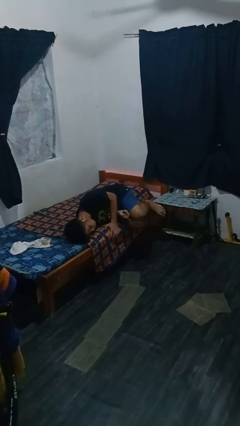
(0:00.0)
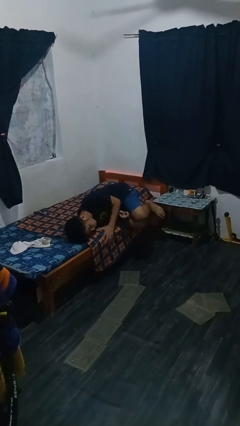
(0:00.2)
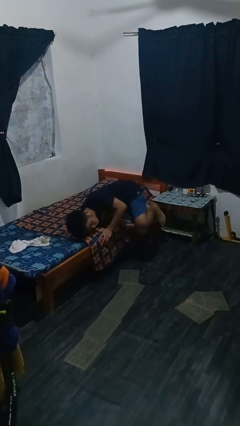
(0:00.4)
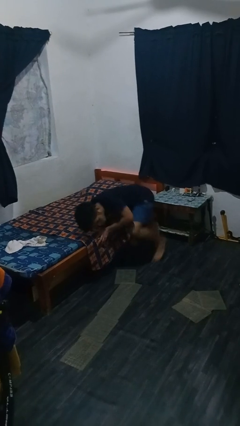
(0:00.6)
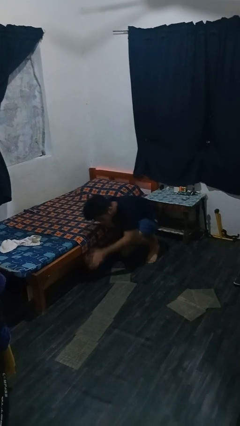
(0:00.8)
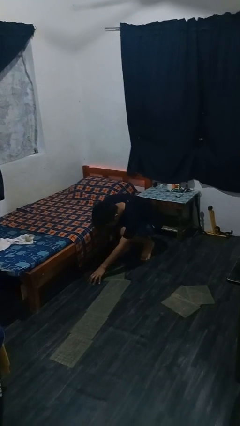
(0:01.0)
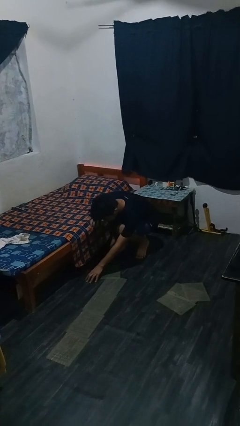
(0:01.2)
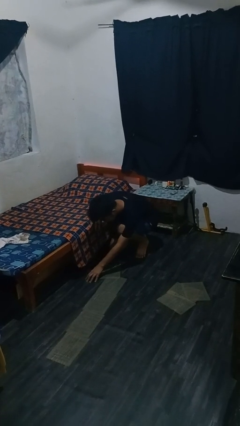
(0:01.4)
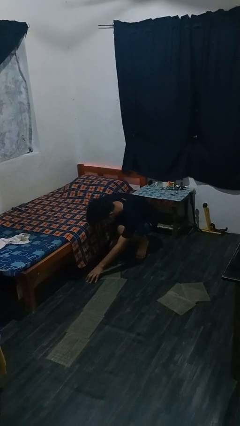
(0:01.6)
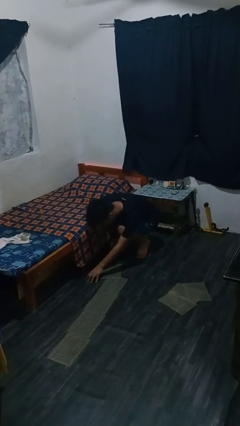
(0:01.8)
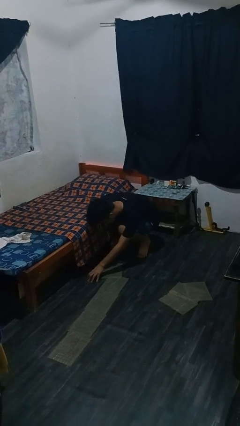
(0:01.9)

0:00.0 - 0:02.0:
person falls from bed

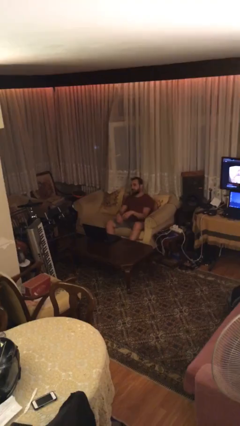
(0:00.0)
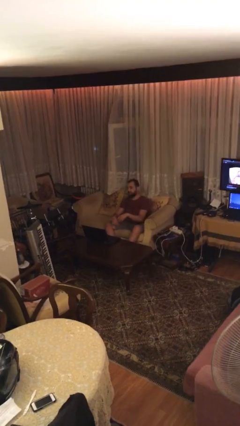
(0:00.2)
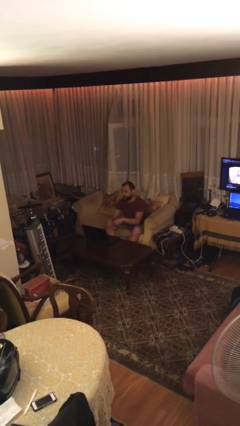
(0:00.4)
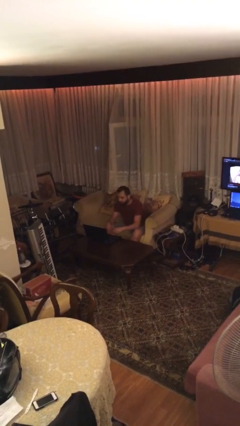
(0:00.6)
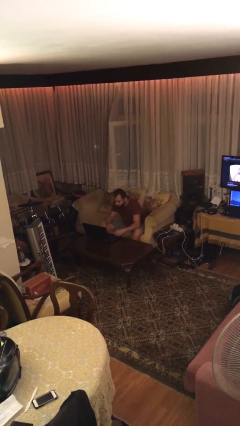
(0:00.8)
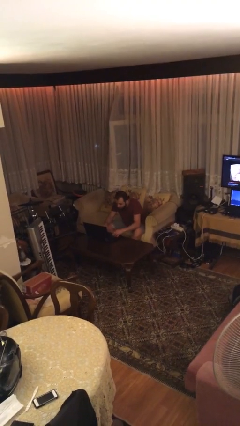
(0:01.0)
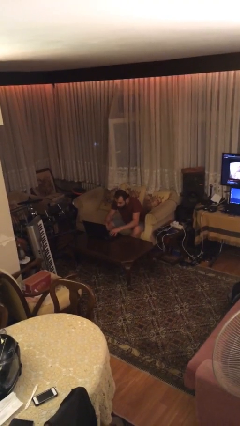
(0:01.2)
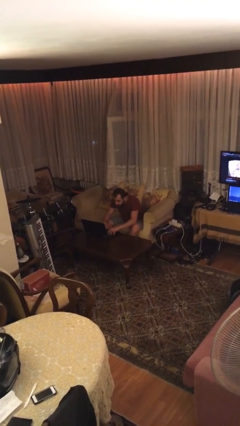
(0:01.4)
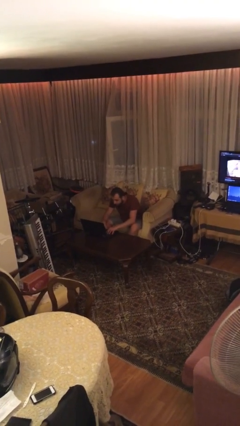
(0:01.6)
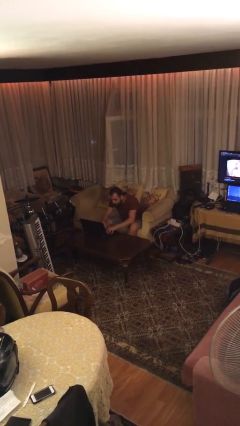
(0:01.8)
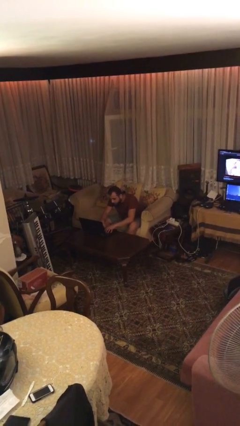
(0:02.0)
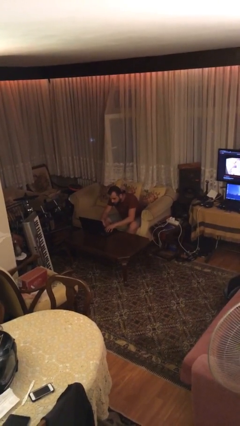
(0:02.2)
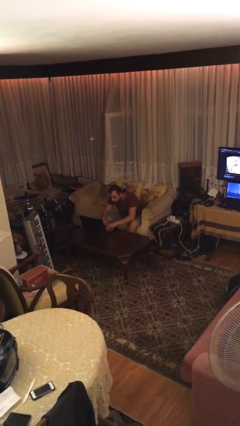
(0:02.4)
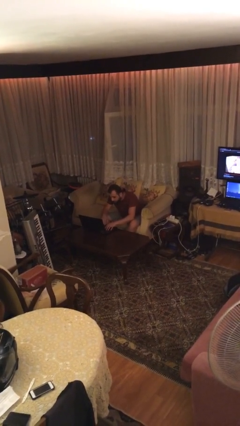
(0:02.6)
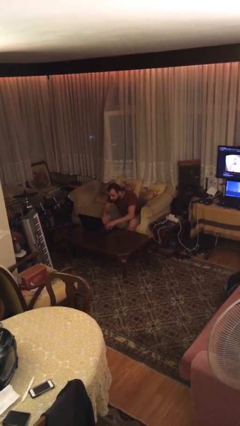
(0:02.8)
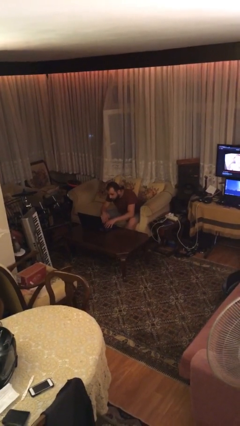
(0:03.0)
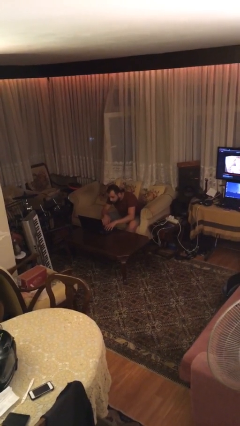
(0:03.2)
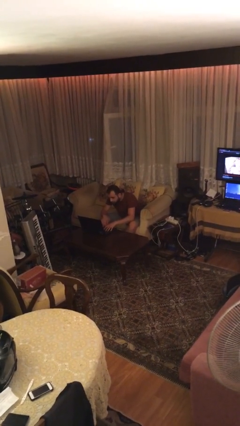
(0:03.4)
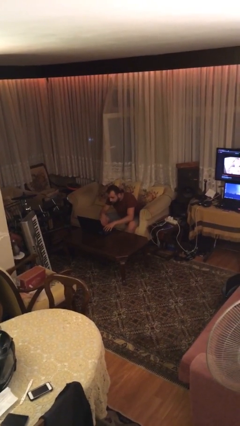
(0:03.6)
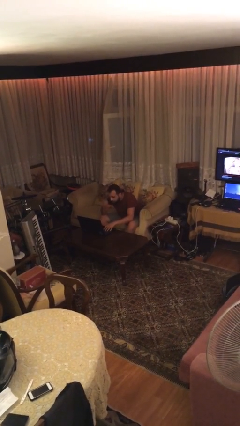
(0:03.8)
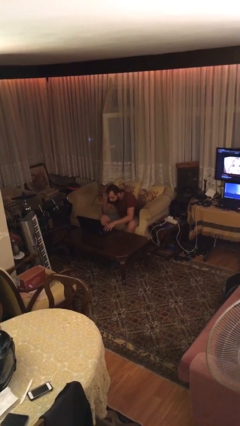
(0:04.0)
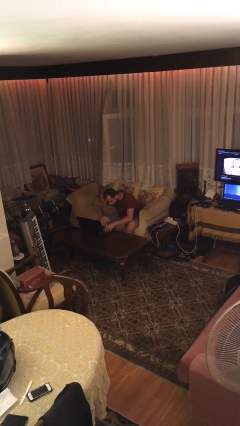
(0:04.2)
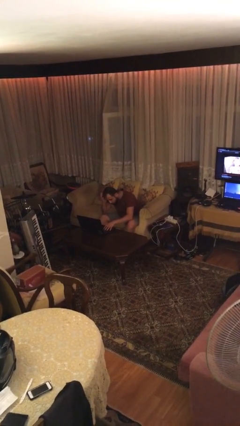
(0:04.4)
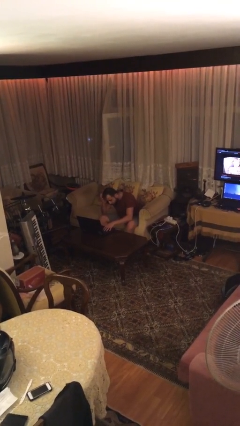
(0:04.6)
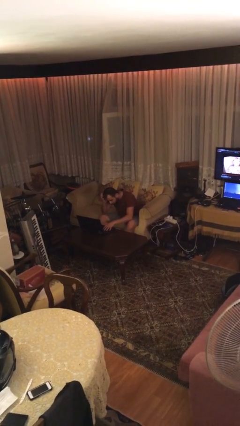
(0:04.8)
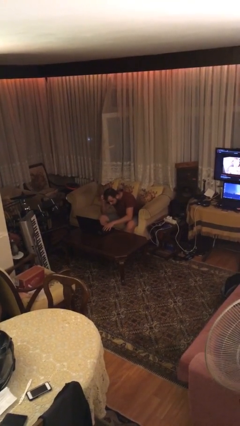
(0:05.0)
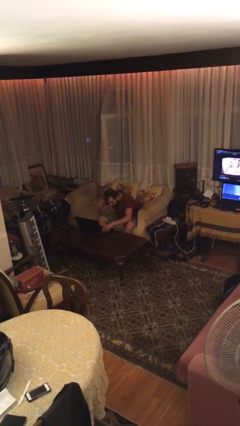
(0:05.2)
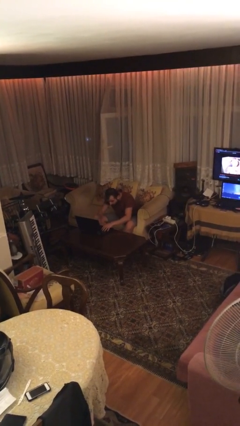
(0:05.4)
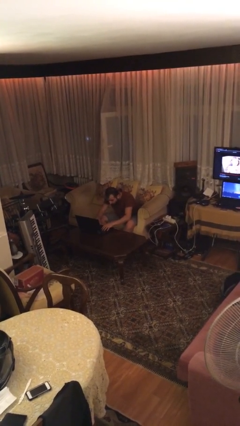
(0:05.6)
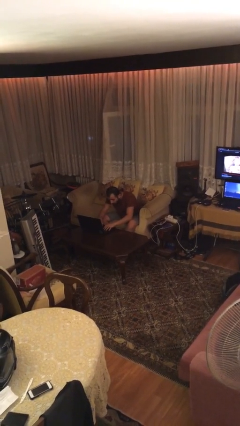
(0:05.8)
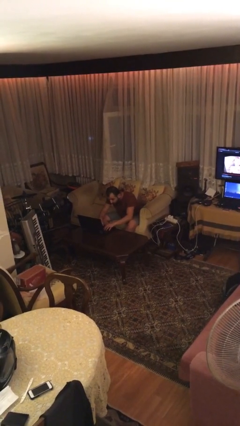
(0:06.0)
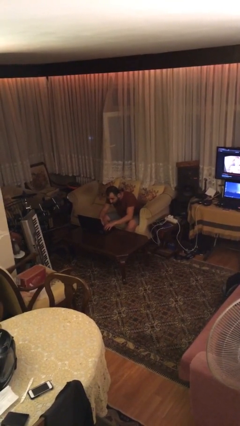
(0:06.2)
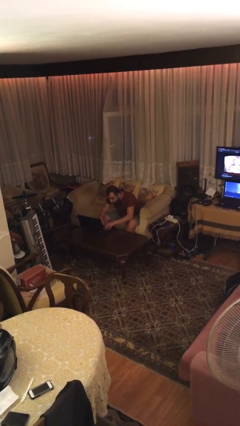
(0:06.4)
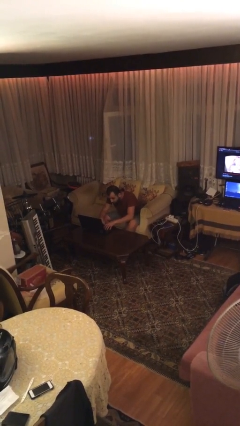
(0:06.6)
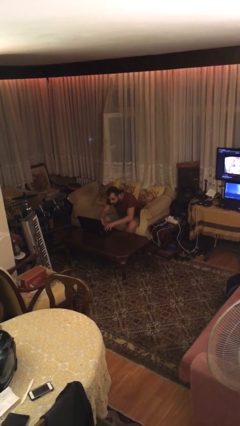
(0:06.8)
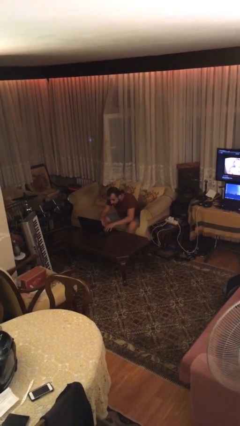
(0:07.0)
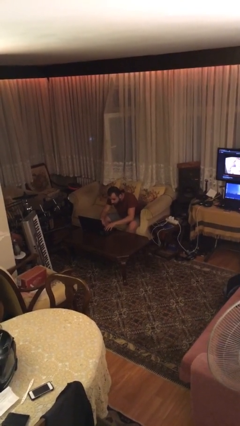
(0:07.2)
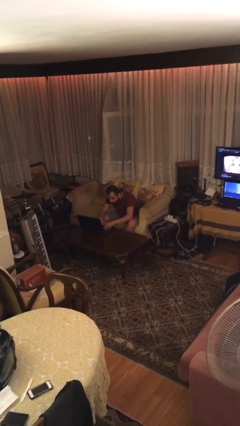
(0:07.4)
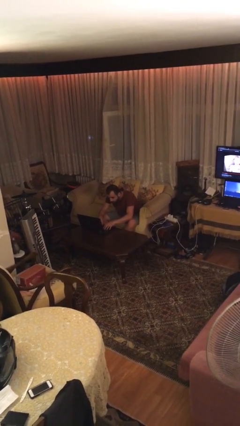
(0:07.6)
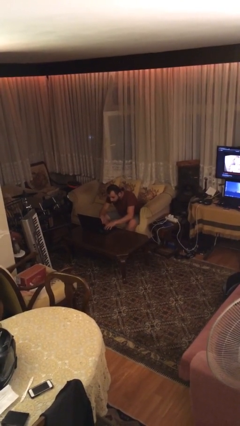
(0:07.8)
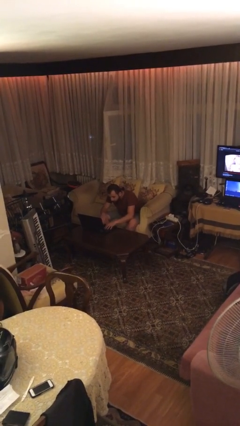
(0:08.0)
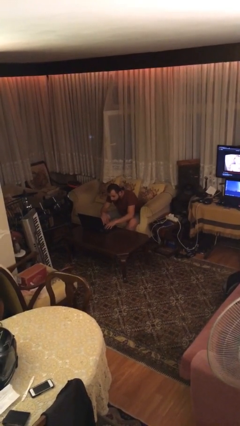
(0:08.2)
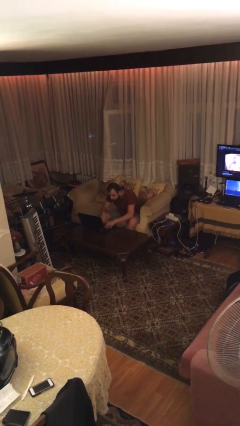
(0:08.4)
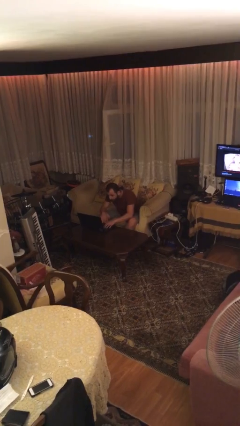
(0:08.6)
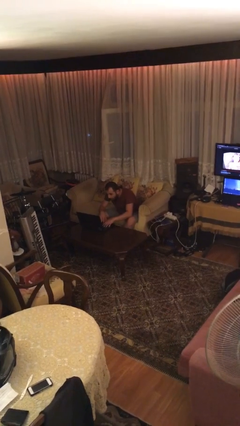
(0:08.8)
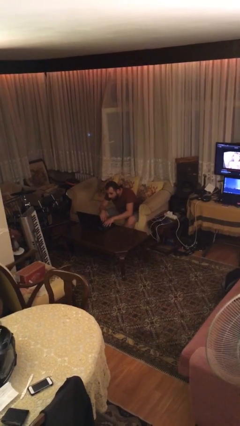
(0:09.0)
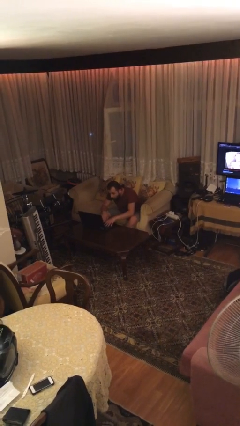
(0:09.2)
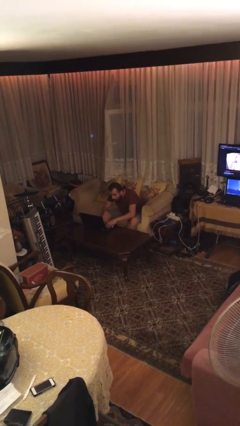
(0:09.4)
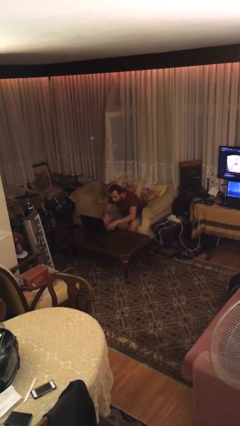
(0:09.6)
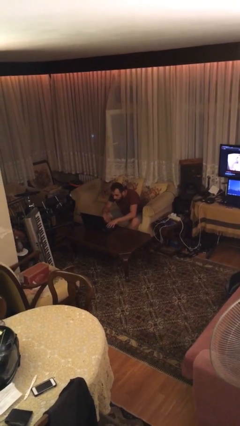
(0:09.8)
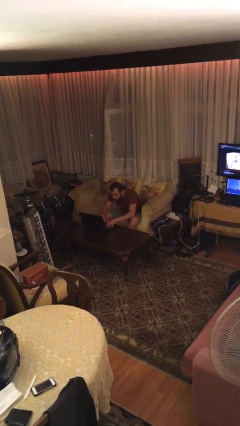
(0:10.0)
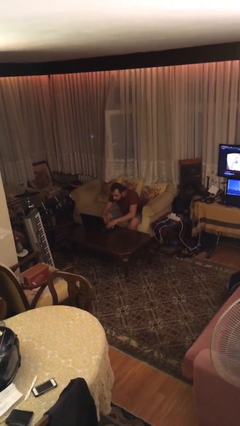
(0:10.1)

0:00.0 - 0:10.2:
person interacts with laptop

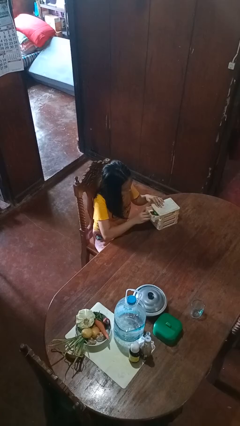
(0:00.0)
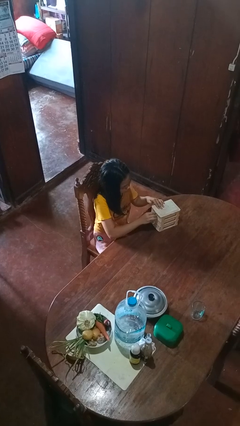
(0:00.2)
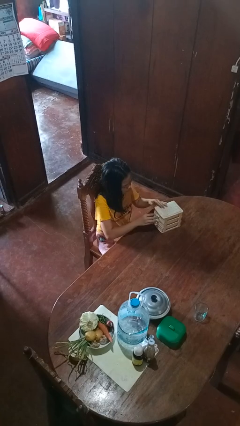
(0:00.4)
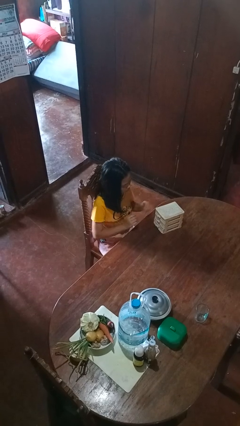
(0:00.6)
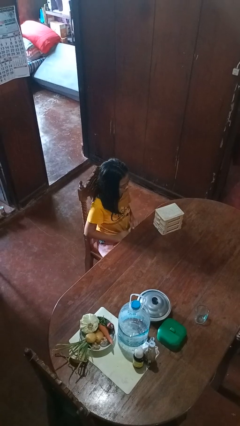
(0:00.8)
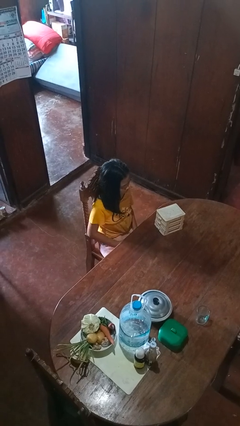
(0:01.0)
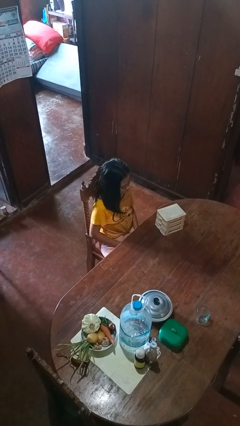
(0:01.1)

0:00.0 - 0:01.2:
person closes jewelry box

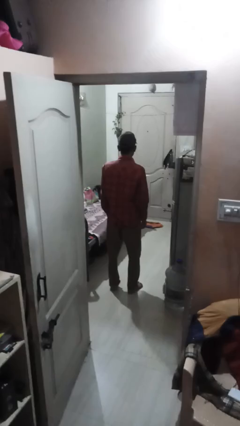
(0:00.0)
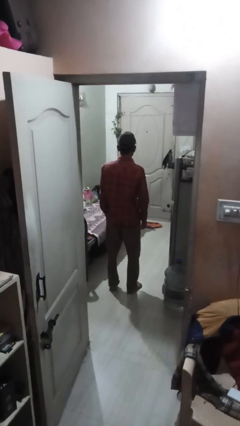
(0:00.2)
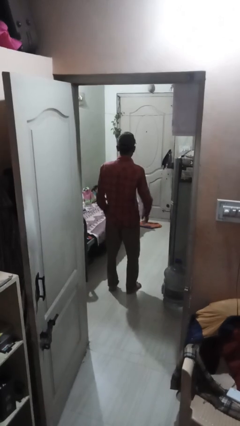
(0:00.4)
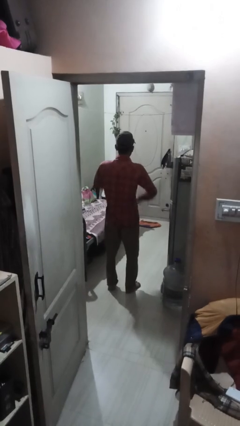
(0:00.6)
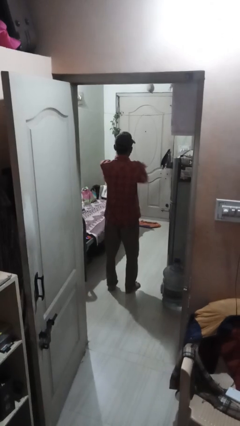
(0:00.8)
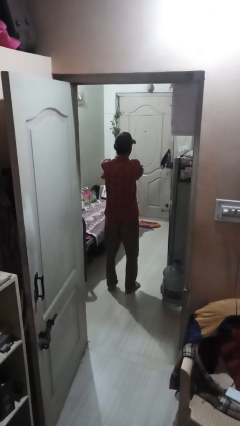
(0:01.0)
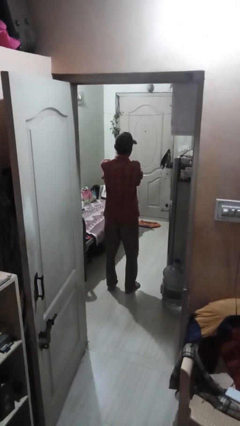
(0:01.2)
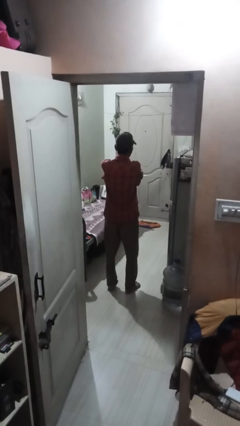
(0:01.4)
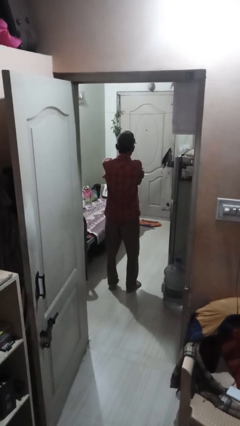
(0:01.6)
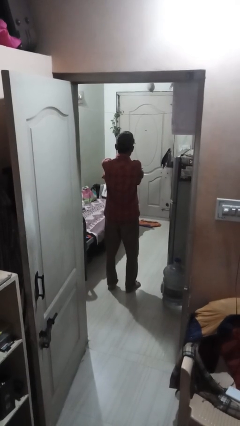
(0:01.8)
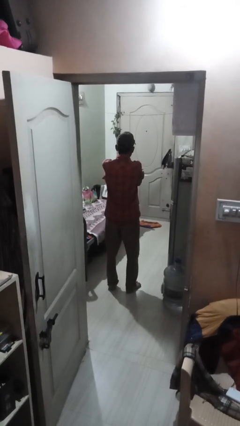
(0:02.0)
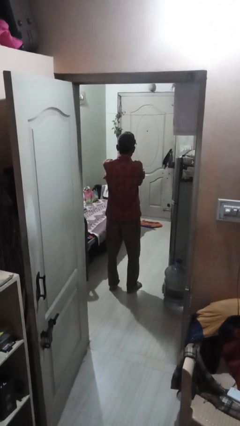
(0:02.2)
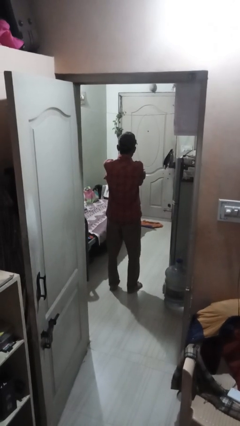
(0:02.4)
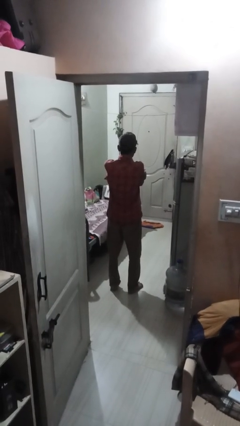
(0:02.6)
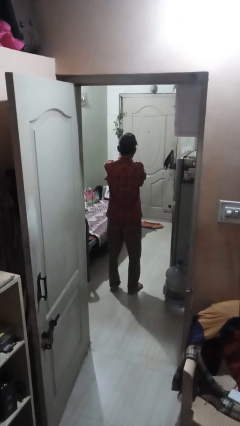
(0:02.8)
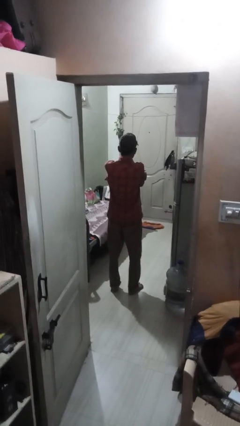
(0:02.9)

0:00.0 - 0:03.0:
person crosses arms

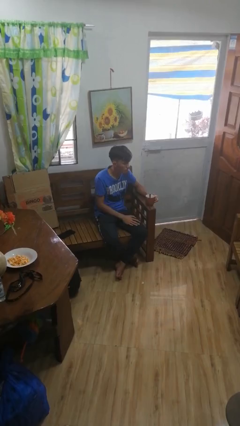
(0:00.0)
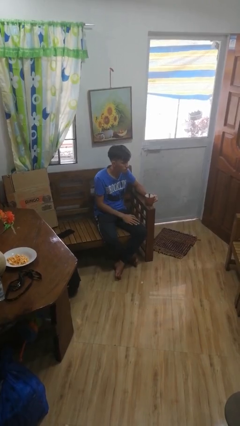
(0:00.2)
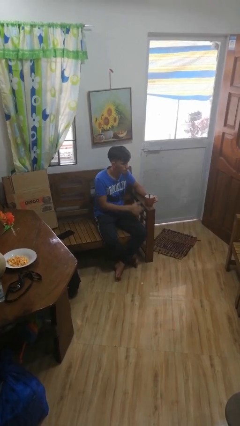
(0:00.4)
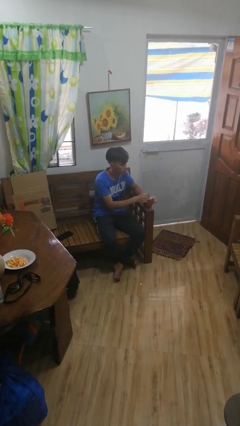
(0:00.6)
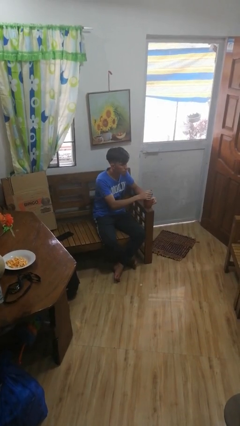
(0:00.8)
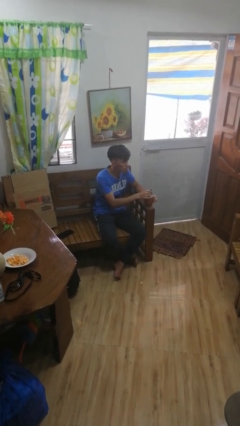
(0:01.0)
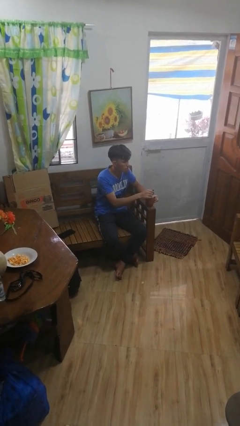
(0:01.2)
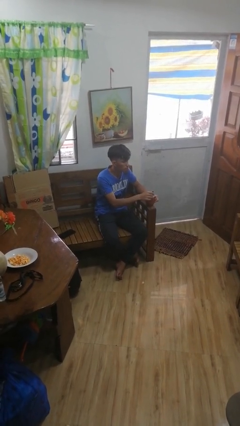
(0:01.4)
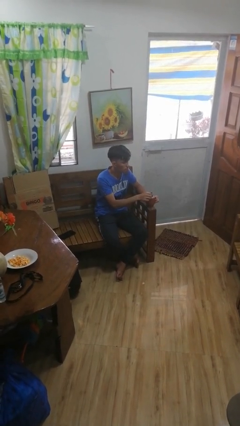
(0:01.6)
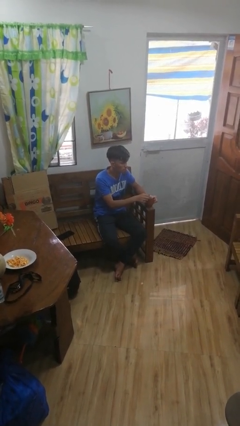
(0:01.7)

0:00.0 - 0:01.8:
person stirs mug
